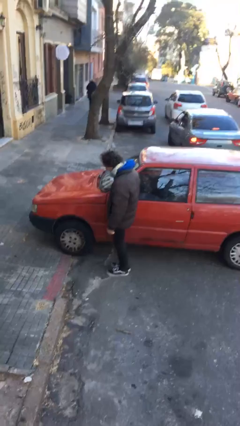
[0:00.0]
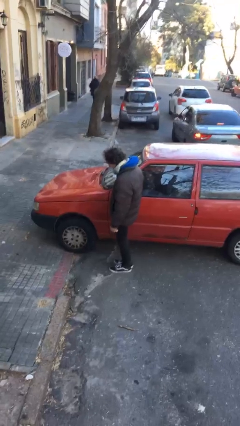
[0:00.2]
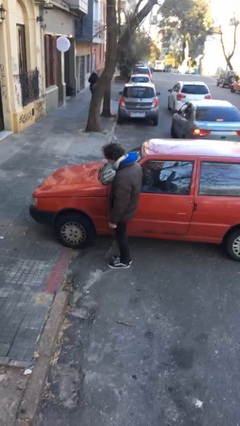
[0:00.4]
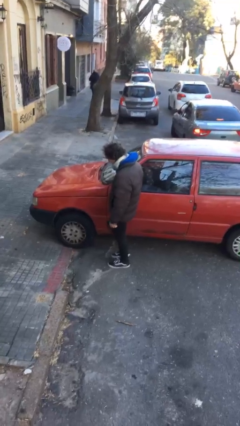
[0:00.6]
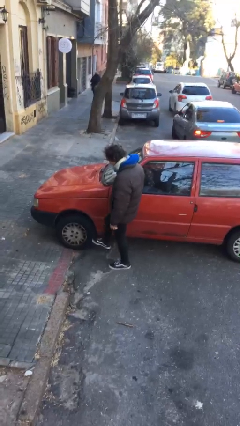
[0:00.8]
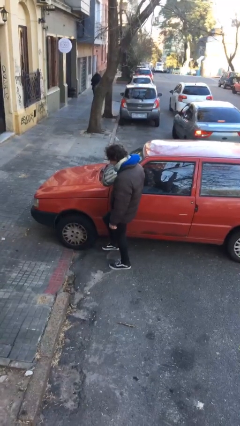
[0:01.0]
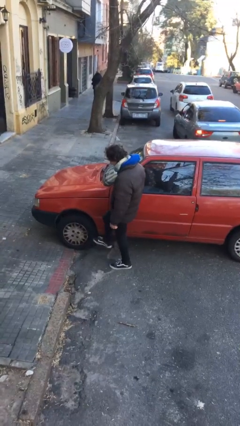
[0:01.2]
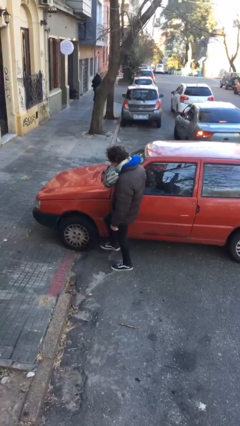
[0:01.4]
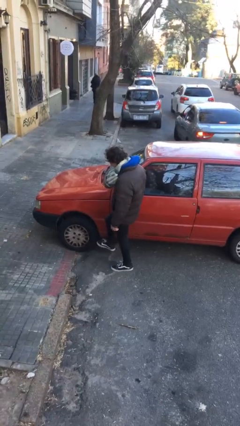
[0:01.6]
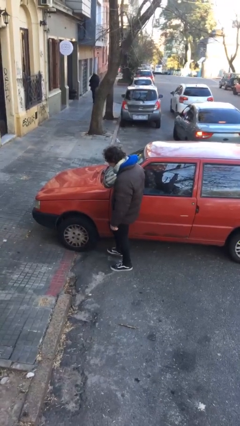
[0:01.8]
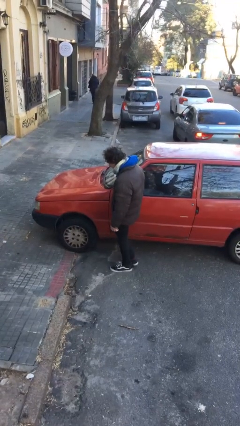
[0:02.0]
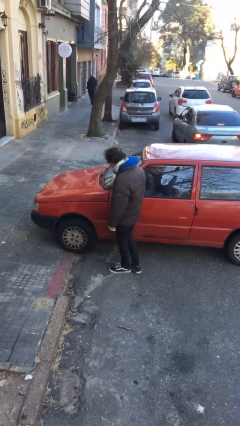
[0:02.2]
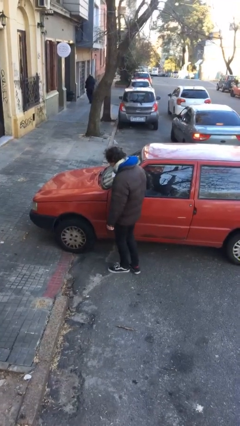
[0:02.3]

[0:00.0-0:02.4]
person kicks car tires

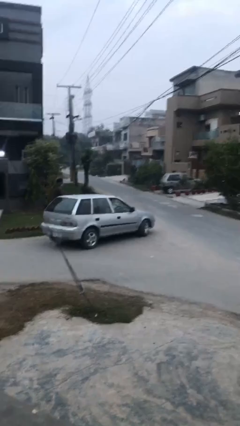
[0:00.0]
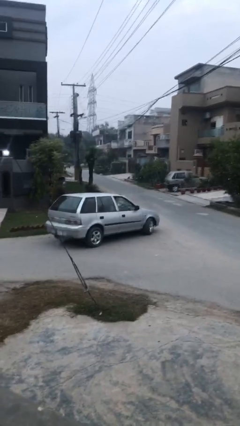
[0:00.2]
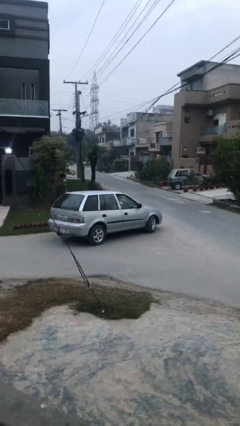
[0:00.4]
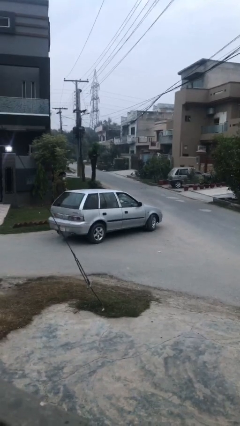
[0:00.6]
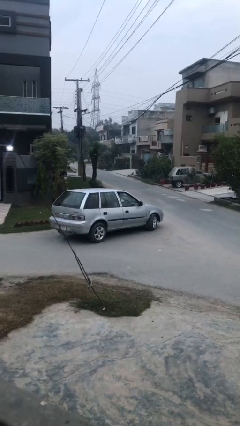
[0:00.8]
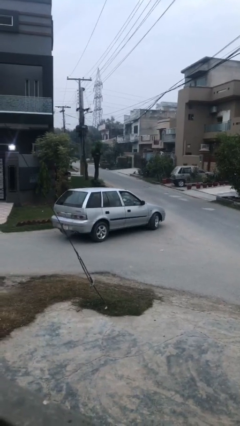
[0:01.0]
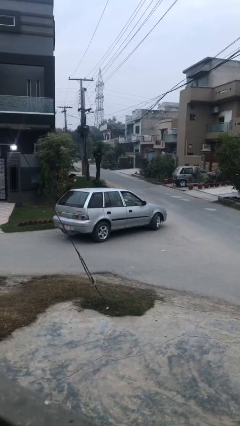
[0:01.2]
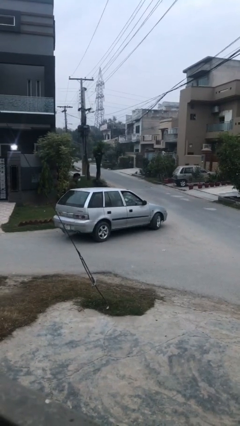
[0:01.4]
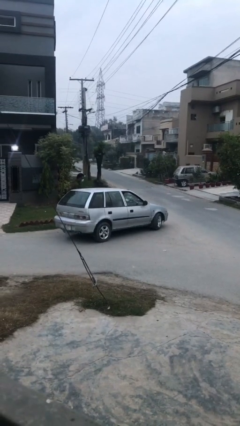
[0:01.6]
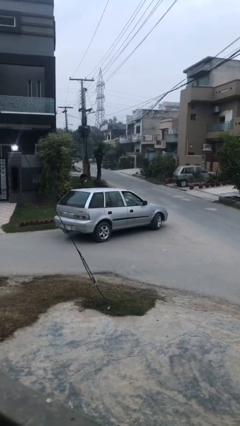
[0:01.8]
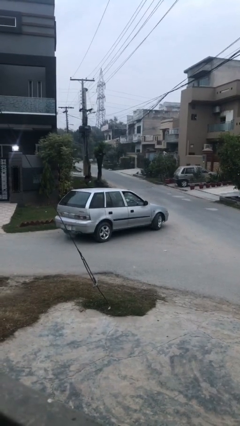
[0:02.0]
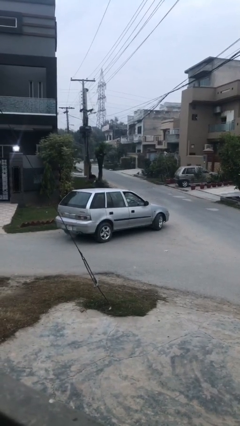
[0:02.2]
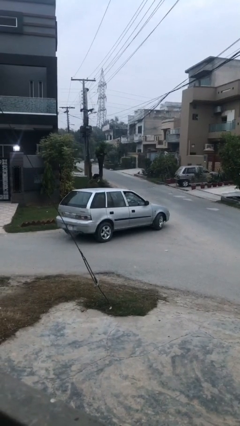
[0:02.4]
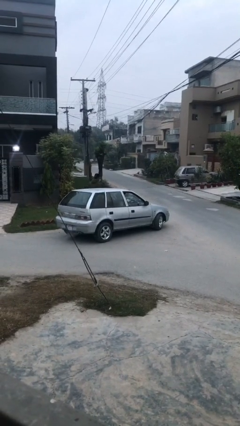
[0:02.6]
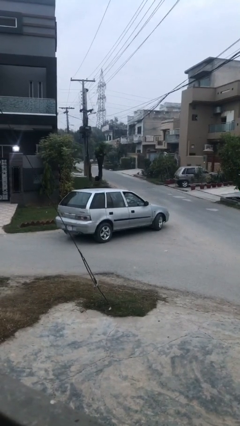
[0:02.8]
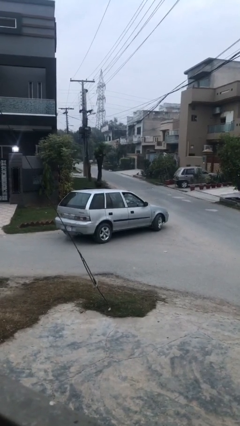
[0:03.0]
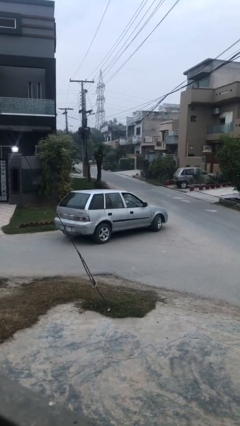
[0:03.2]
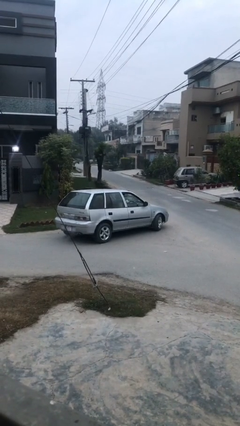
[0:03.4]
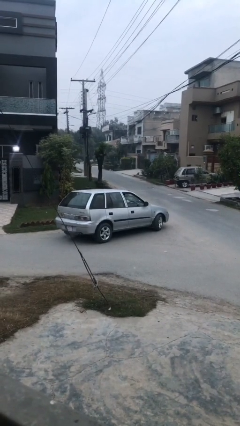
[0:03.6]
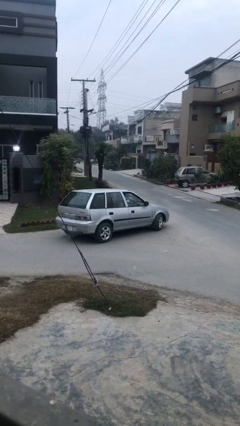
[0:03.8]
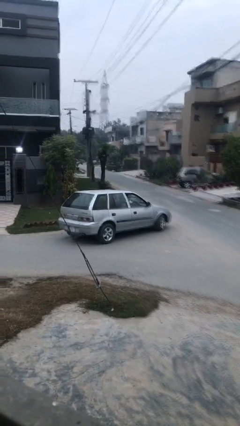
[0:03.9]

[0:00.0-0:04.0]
car picks up person

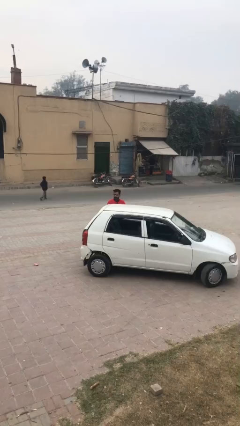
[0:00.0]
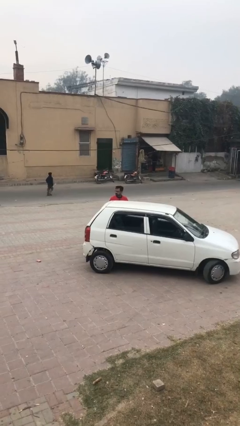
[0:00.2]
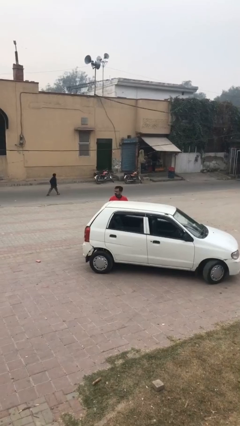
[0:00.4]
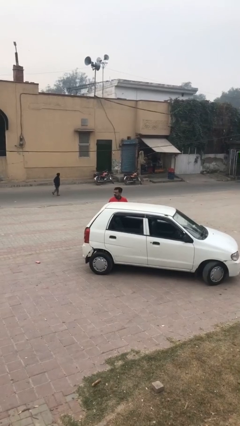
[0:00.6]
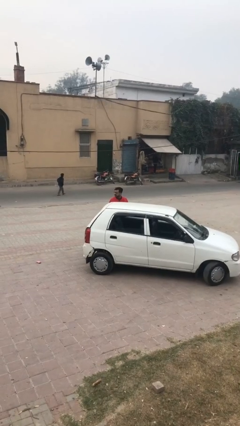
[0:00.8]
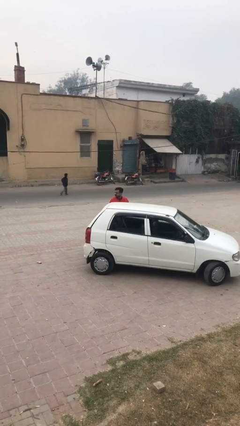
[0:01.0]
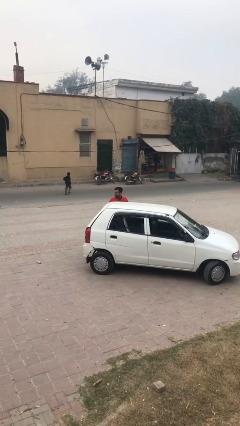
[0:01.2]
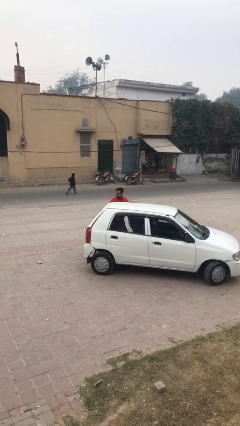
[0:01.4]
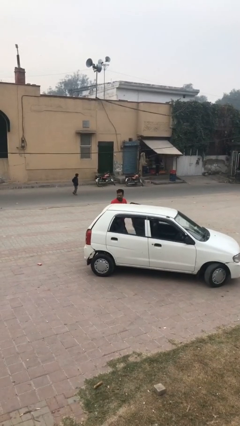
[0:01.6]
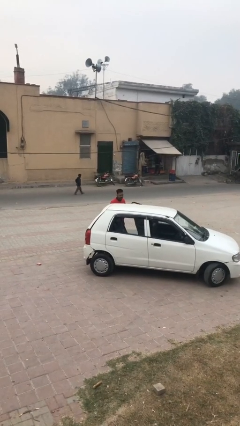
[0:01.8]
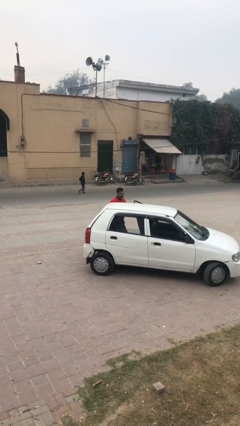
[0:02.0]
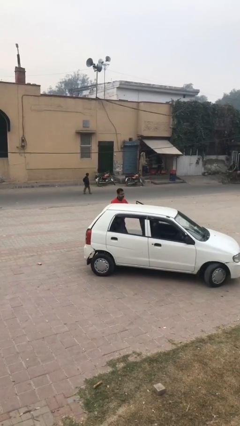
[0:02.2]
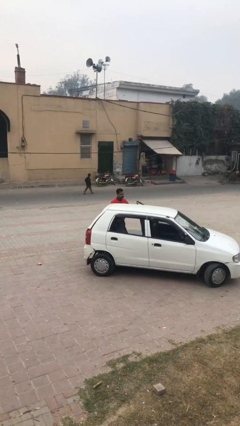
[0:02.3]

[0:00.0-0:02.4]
person opens car door

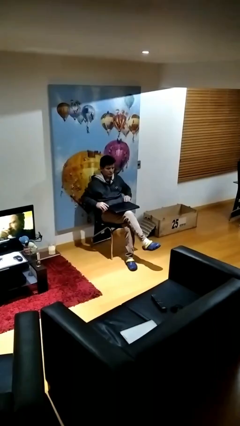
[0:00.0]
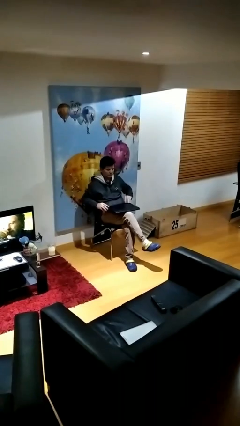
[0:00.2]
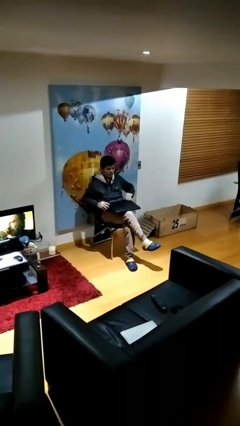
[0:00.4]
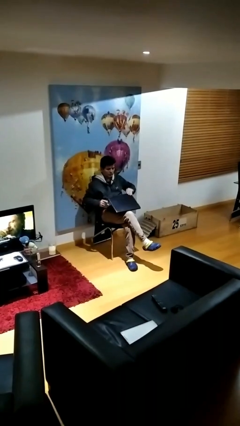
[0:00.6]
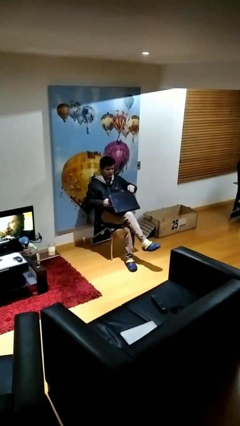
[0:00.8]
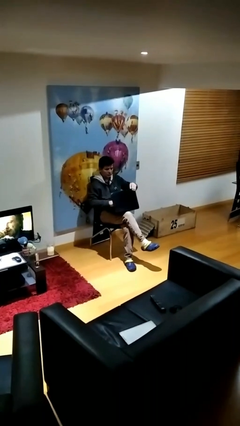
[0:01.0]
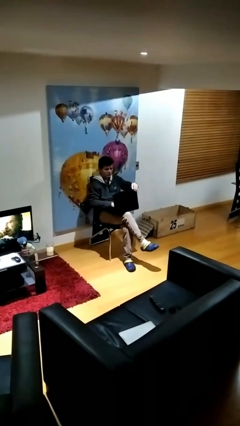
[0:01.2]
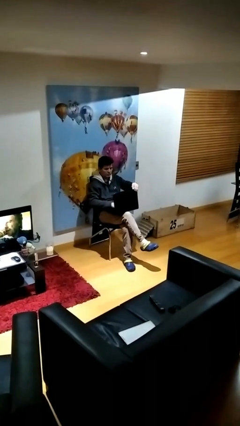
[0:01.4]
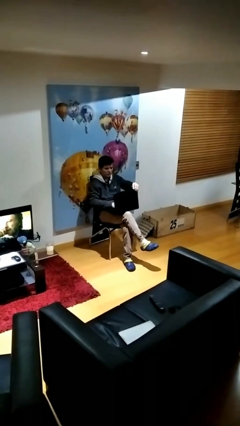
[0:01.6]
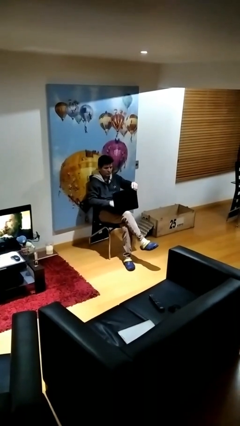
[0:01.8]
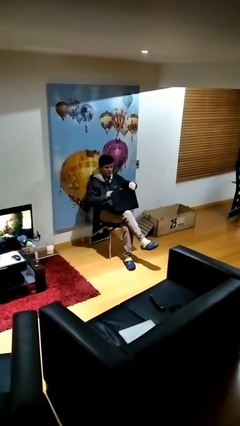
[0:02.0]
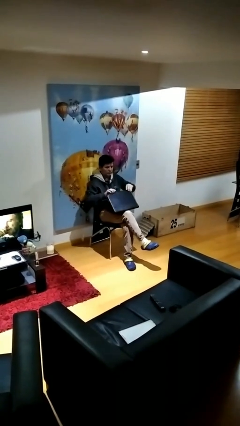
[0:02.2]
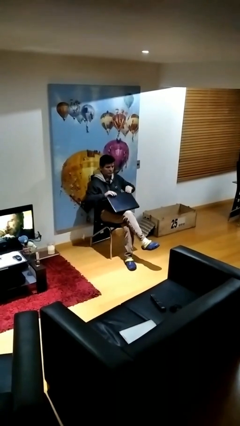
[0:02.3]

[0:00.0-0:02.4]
person interacts with laptop

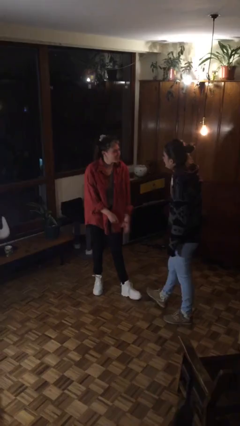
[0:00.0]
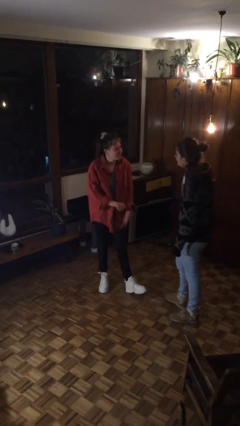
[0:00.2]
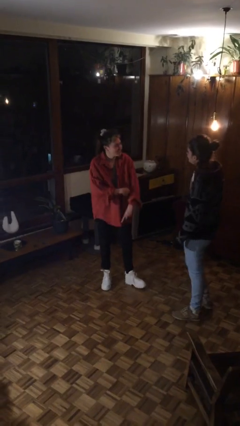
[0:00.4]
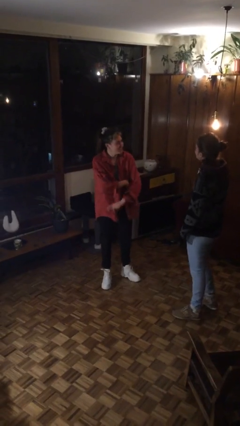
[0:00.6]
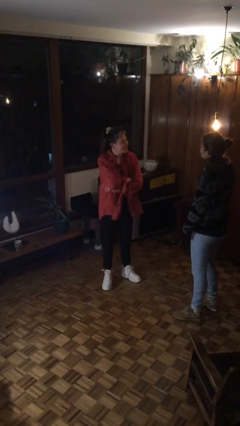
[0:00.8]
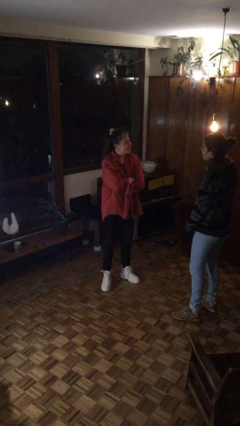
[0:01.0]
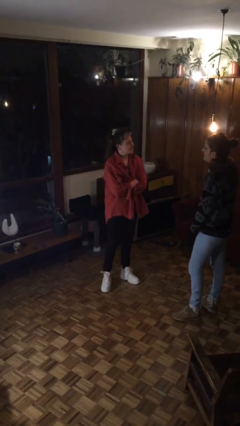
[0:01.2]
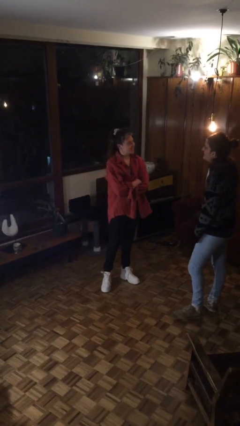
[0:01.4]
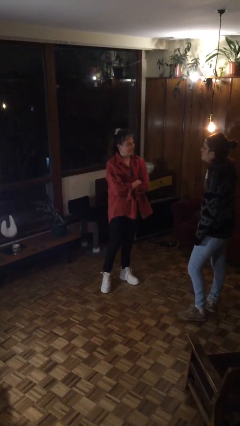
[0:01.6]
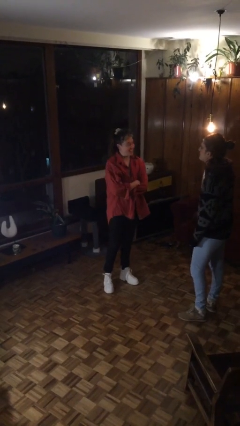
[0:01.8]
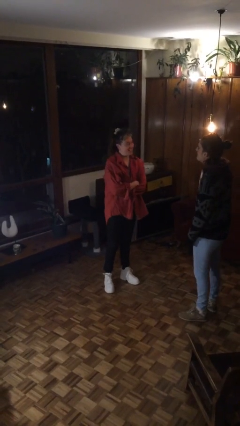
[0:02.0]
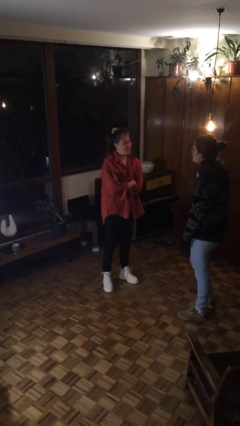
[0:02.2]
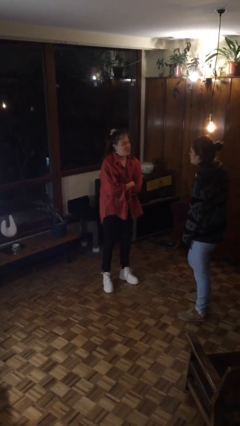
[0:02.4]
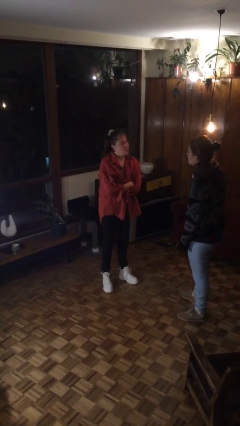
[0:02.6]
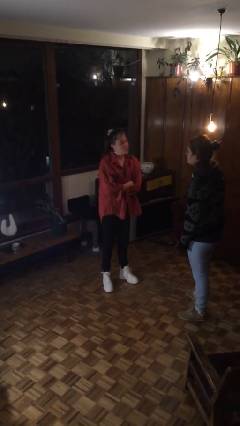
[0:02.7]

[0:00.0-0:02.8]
person talks to person

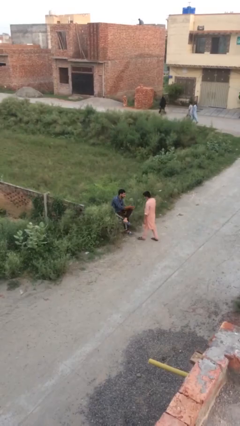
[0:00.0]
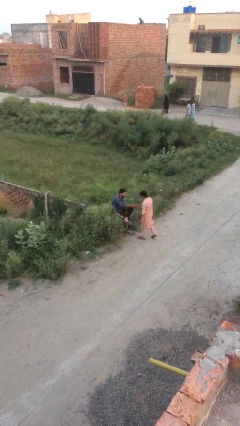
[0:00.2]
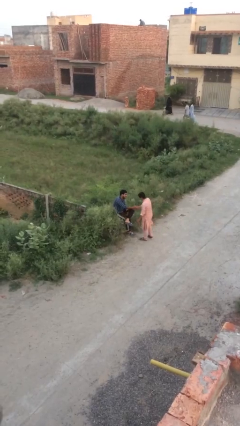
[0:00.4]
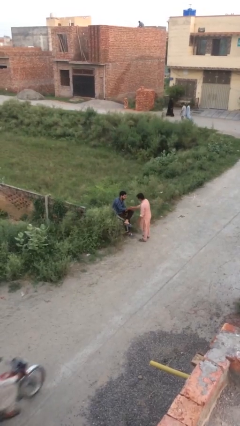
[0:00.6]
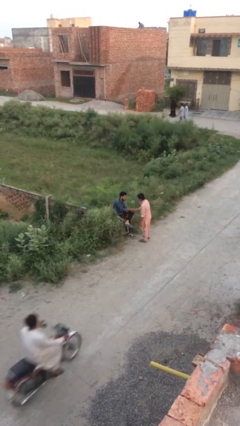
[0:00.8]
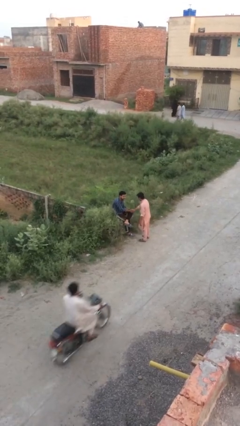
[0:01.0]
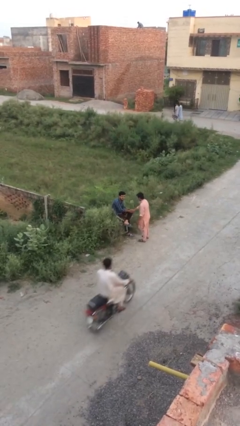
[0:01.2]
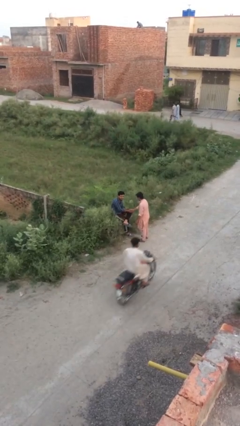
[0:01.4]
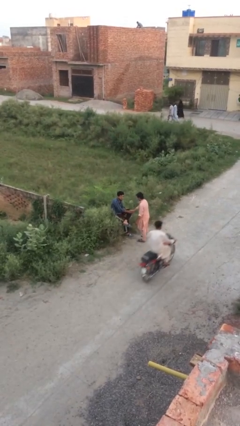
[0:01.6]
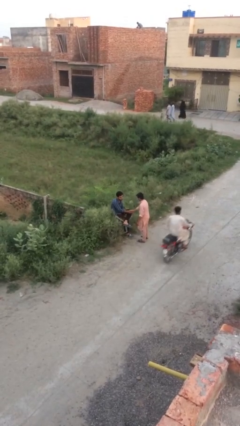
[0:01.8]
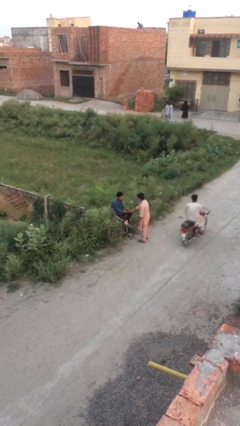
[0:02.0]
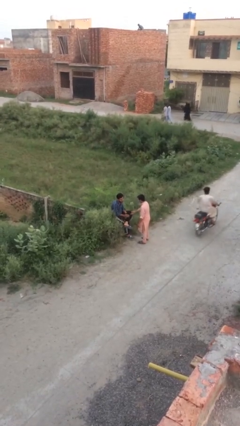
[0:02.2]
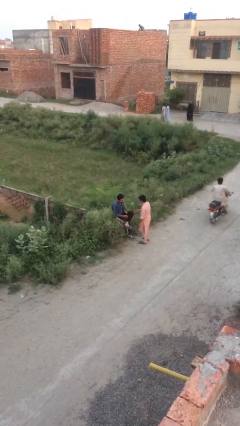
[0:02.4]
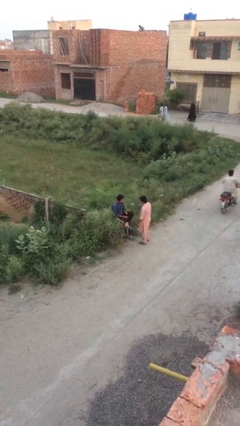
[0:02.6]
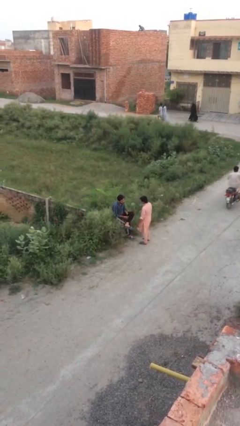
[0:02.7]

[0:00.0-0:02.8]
person shakes hand

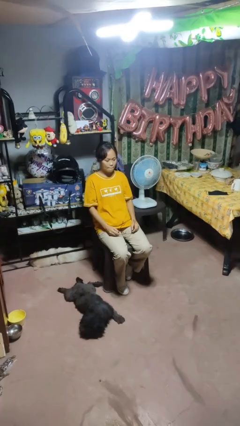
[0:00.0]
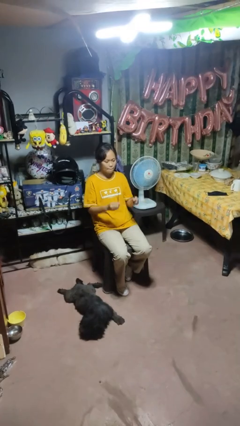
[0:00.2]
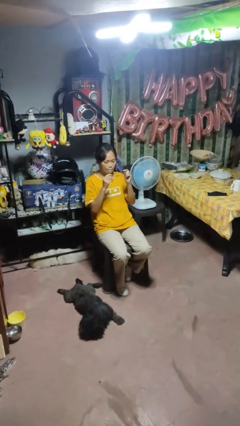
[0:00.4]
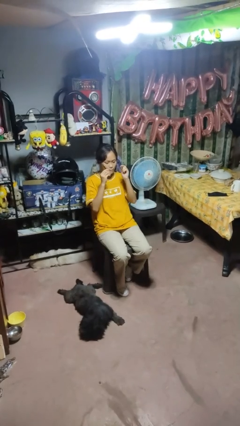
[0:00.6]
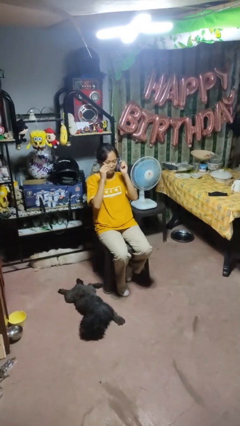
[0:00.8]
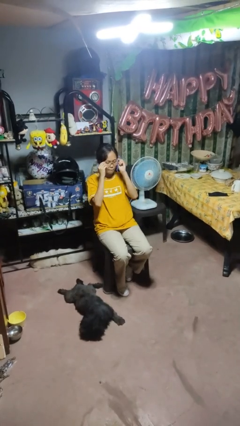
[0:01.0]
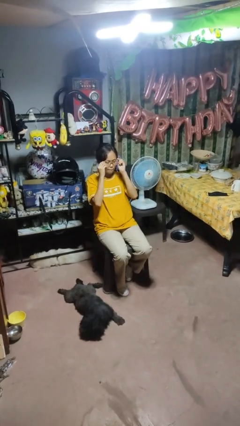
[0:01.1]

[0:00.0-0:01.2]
person puts on glasses
